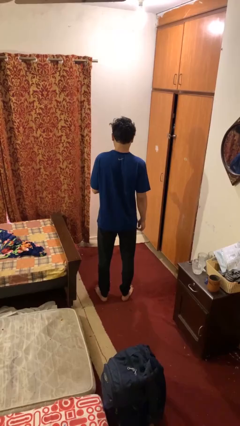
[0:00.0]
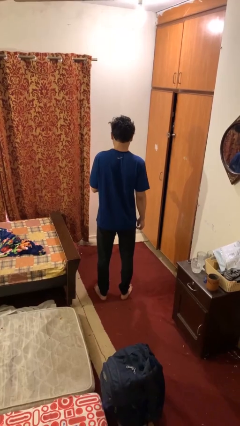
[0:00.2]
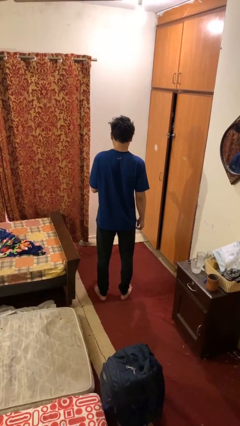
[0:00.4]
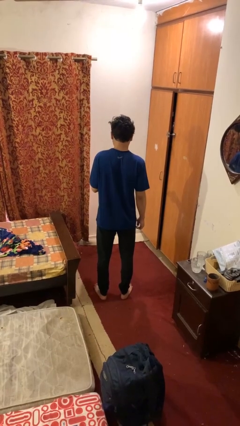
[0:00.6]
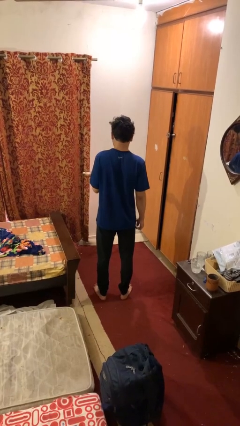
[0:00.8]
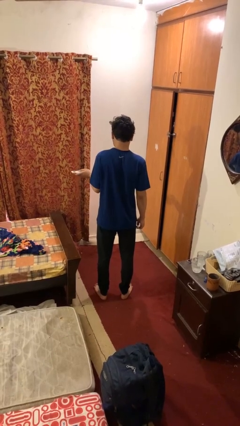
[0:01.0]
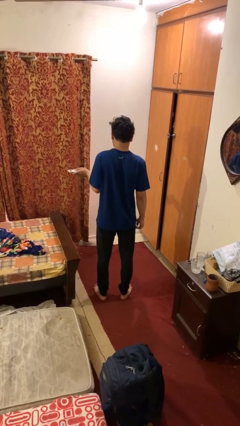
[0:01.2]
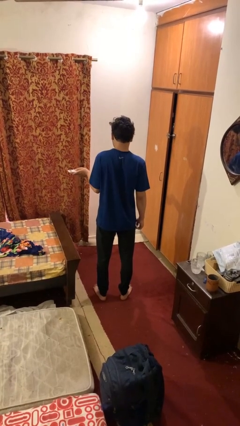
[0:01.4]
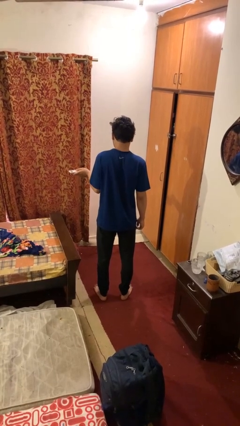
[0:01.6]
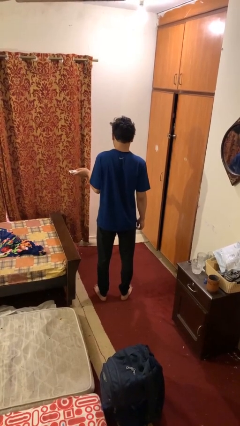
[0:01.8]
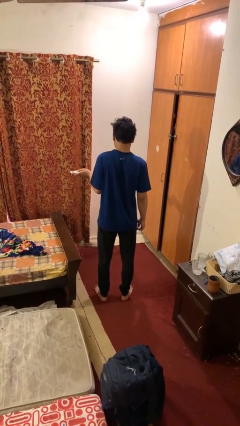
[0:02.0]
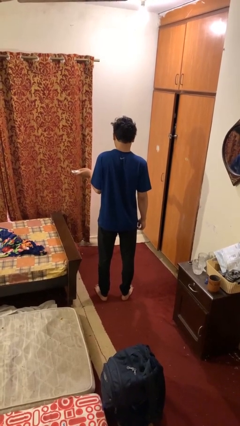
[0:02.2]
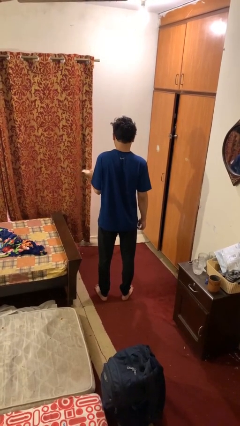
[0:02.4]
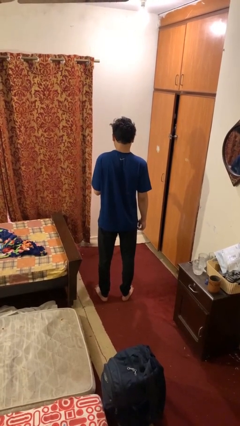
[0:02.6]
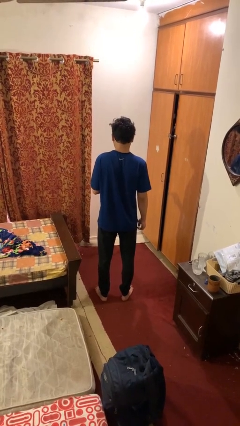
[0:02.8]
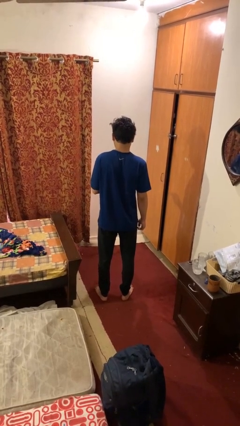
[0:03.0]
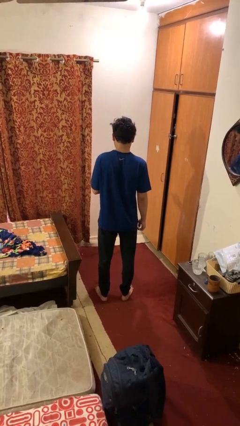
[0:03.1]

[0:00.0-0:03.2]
person uses television remote

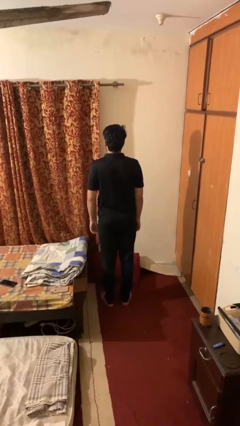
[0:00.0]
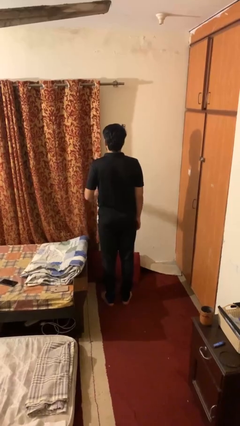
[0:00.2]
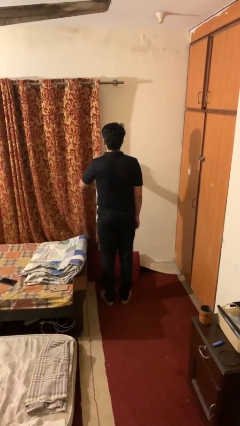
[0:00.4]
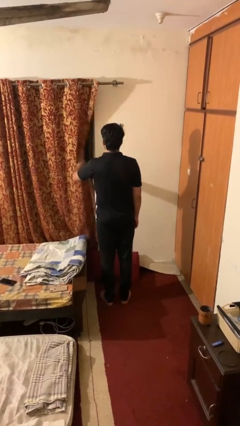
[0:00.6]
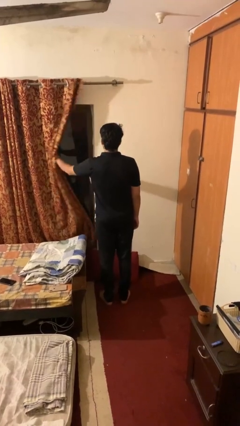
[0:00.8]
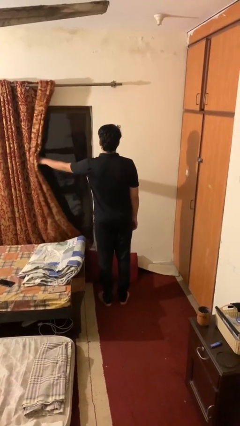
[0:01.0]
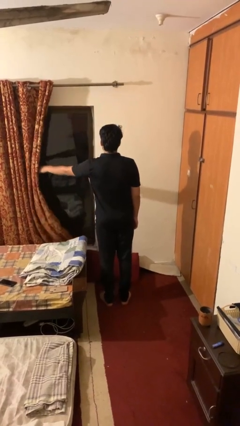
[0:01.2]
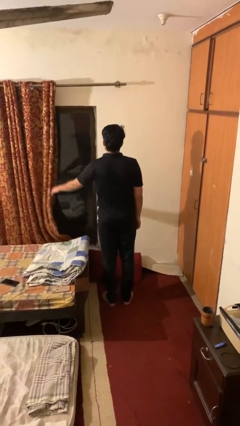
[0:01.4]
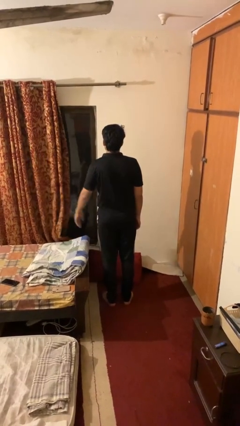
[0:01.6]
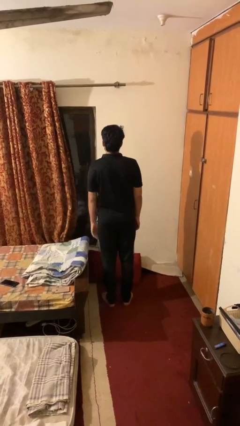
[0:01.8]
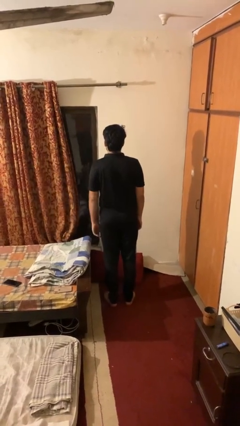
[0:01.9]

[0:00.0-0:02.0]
person opens curtains

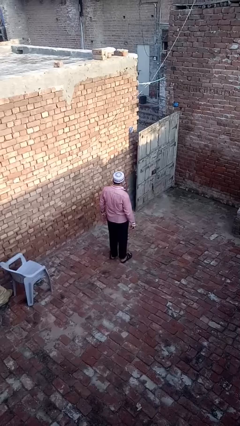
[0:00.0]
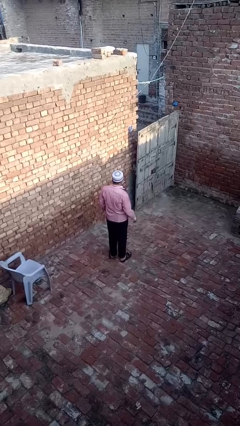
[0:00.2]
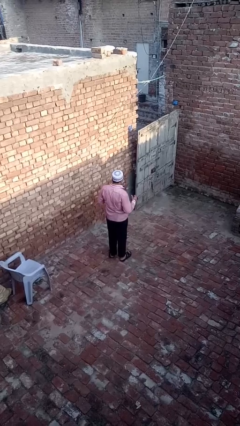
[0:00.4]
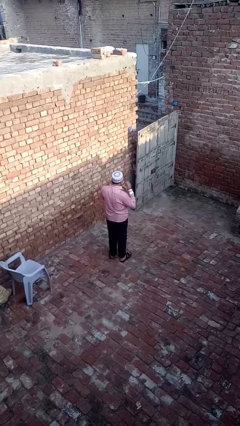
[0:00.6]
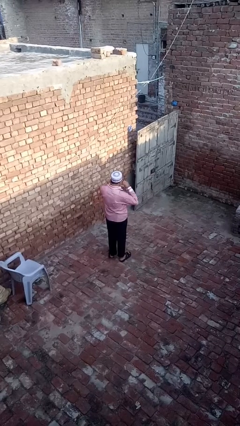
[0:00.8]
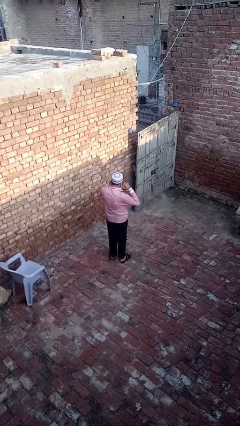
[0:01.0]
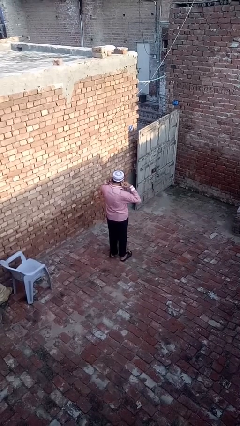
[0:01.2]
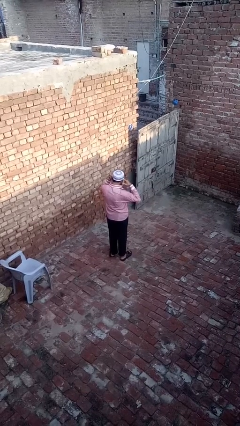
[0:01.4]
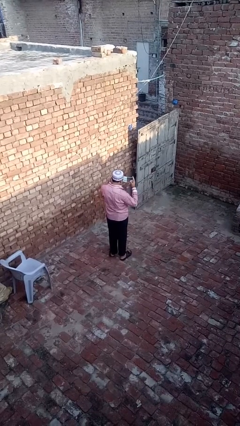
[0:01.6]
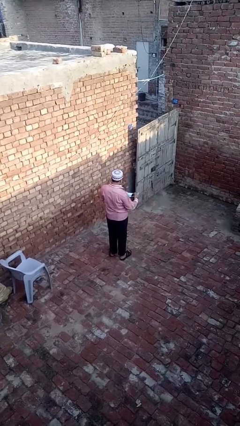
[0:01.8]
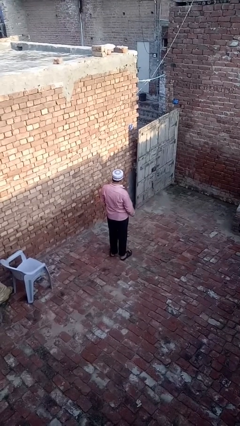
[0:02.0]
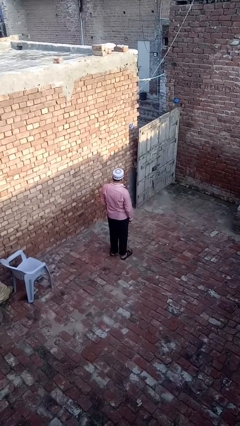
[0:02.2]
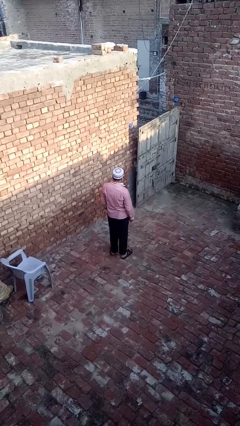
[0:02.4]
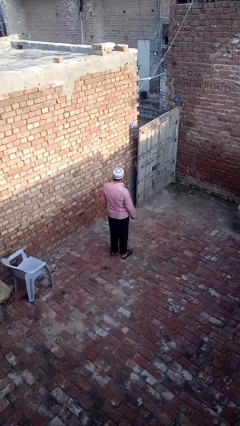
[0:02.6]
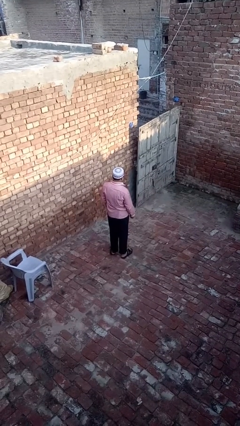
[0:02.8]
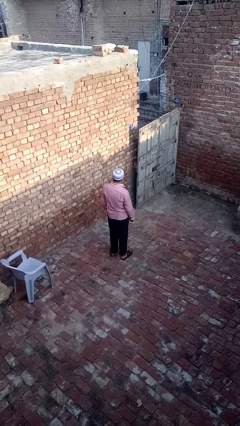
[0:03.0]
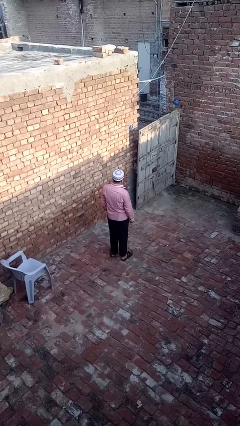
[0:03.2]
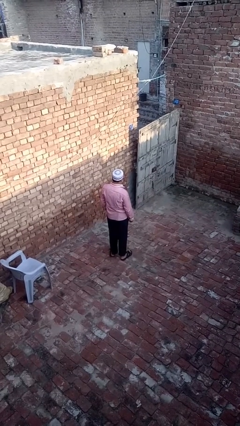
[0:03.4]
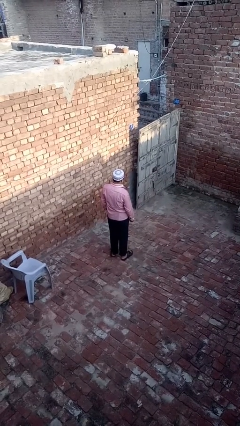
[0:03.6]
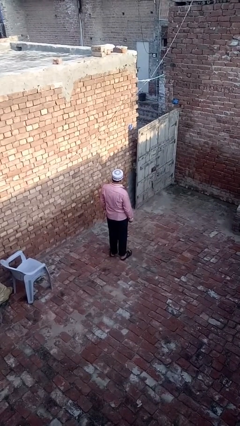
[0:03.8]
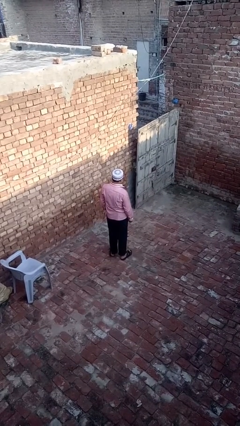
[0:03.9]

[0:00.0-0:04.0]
person takes off facemask

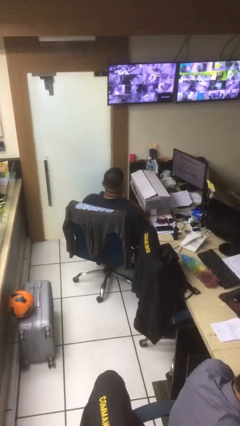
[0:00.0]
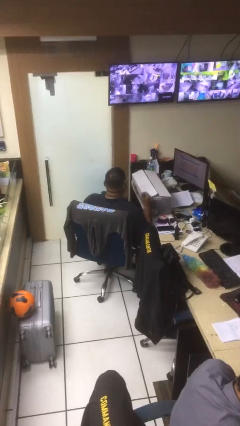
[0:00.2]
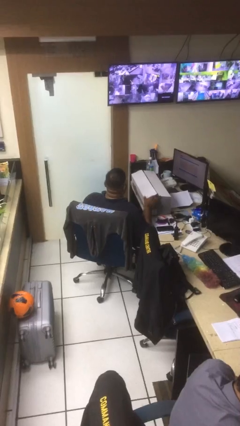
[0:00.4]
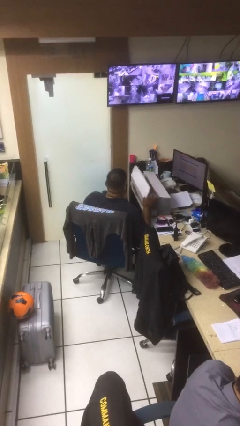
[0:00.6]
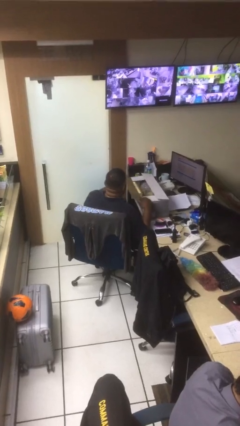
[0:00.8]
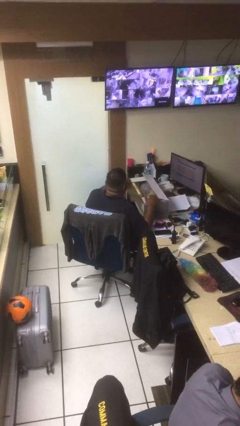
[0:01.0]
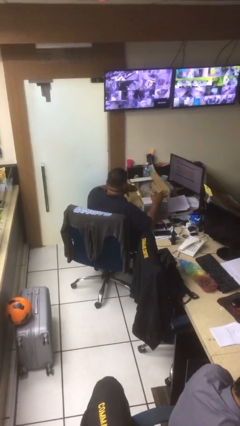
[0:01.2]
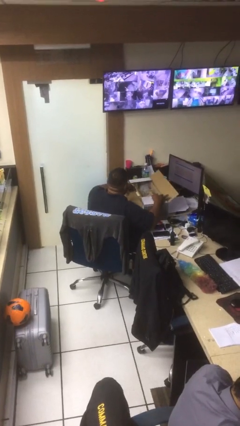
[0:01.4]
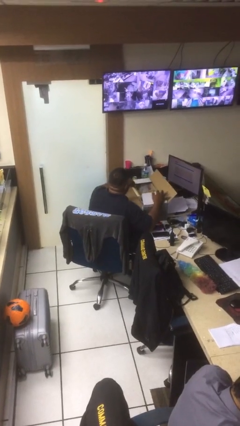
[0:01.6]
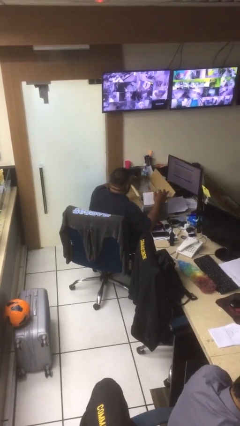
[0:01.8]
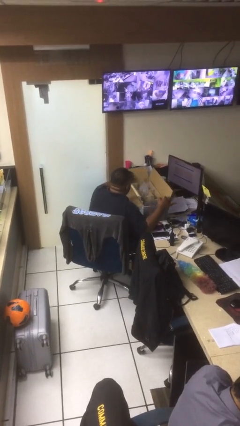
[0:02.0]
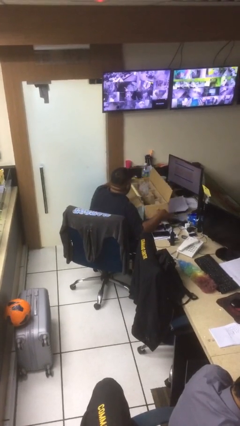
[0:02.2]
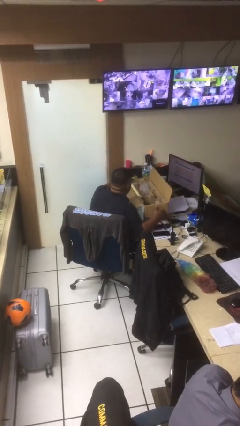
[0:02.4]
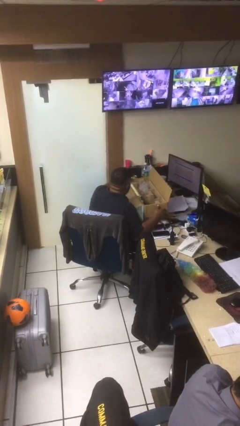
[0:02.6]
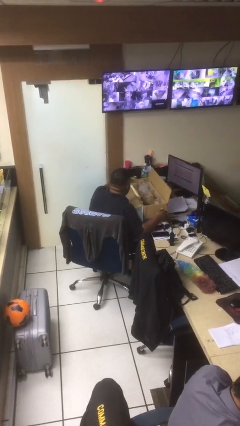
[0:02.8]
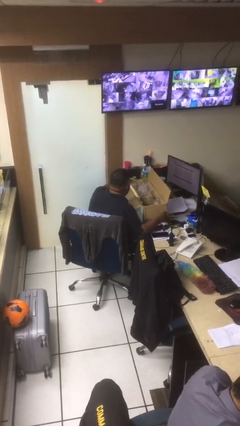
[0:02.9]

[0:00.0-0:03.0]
person opens box

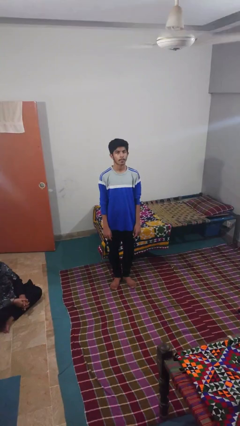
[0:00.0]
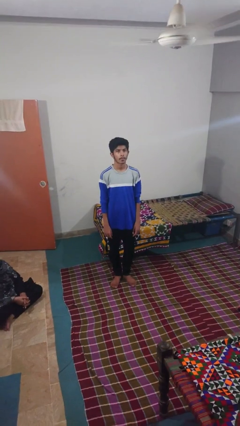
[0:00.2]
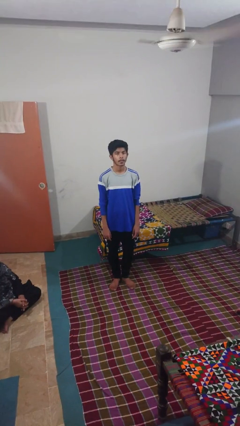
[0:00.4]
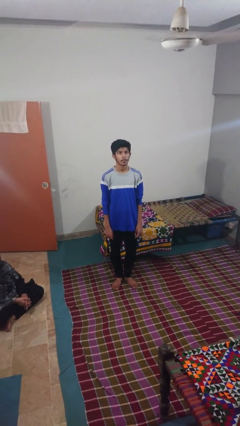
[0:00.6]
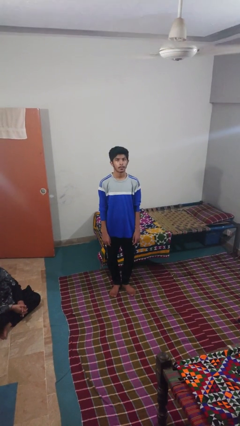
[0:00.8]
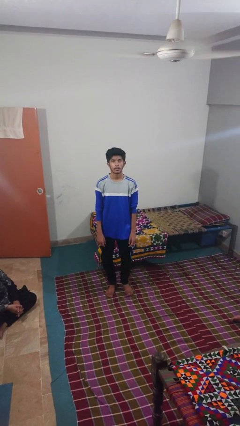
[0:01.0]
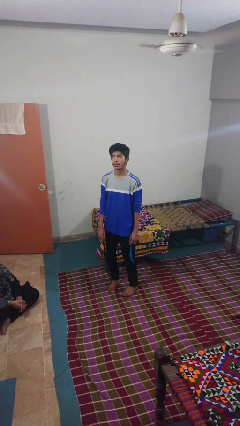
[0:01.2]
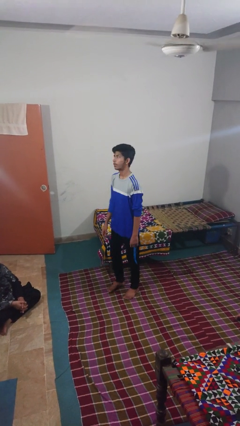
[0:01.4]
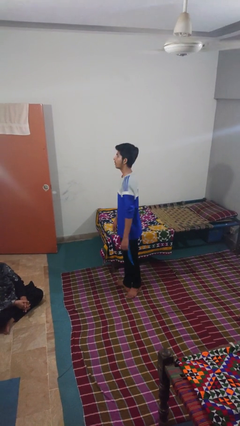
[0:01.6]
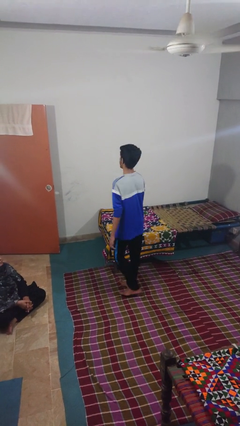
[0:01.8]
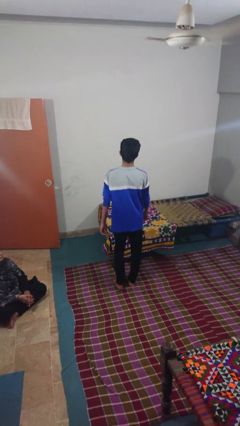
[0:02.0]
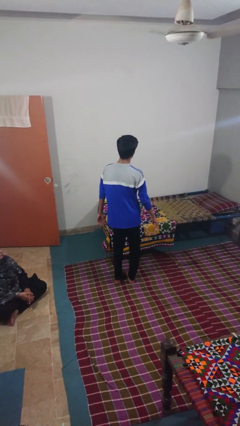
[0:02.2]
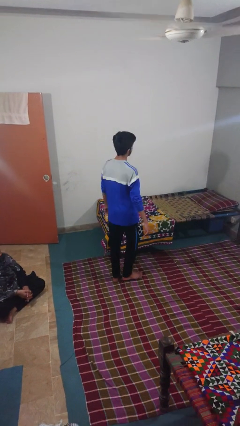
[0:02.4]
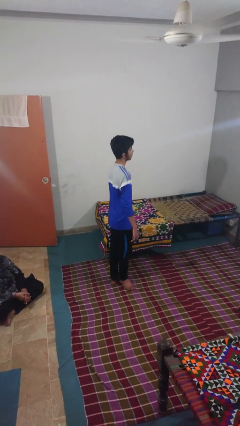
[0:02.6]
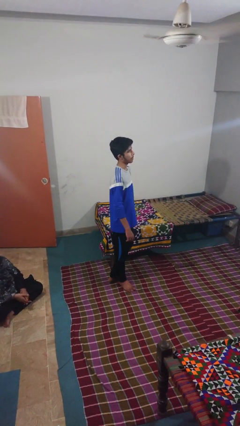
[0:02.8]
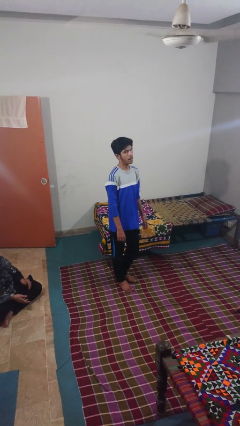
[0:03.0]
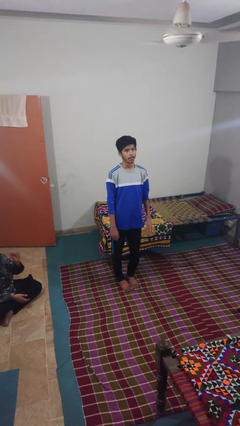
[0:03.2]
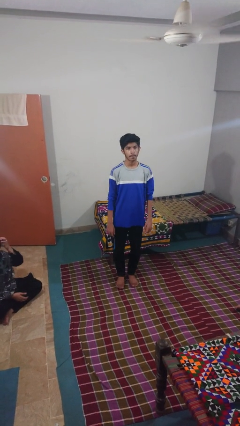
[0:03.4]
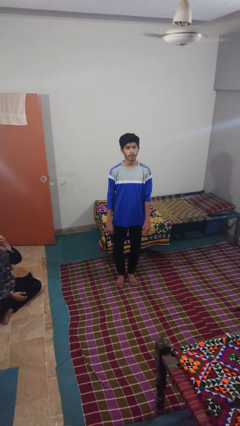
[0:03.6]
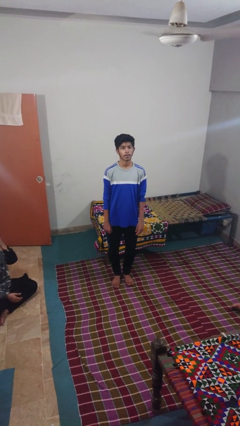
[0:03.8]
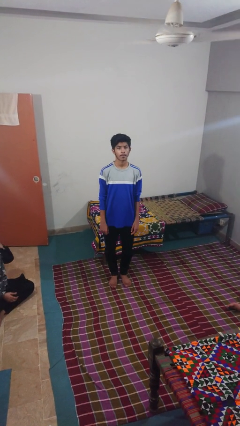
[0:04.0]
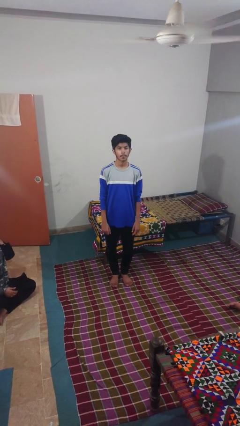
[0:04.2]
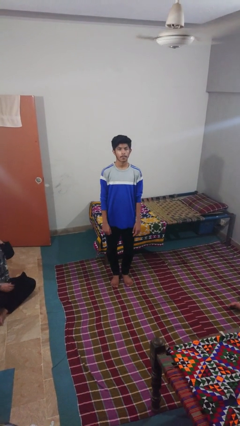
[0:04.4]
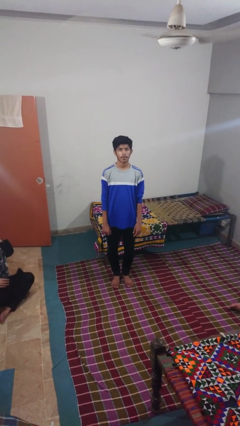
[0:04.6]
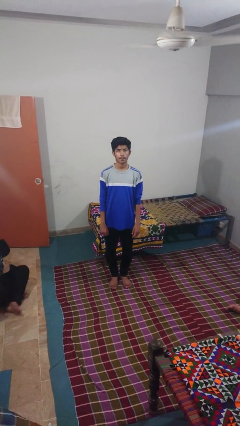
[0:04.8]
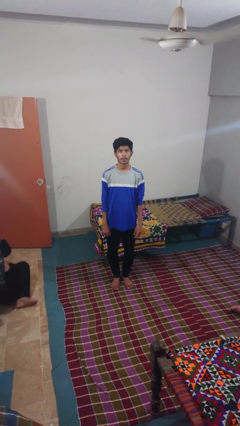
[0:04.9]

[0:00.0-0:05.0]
person twirls

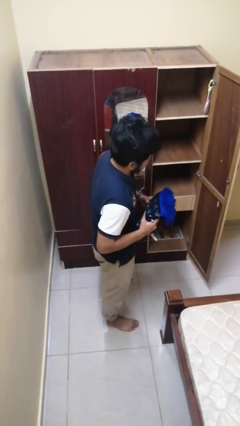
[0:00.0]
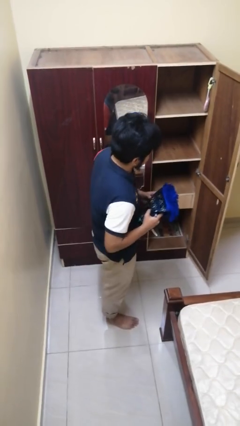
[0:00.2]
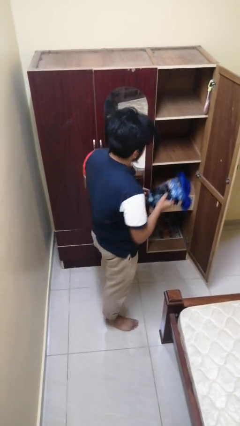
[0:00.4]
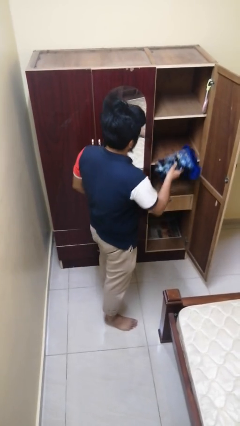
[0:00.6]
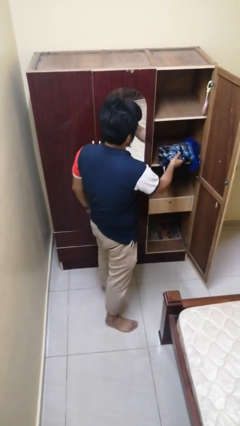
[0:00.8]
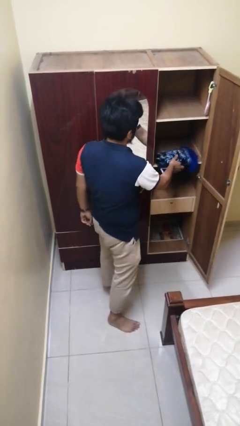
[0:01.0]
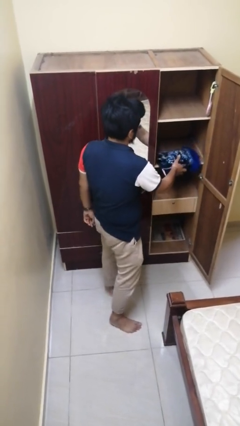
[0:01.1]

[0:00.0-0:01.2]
person puts down object into cabinet
